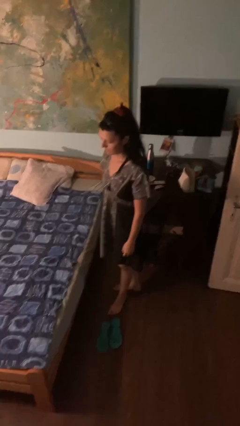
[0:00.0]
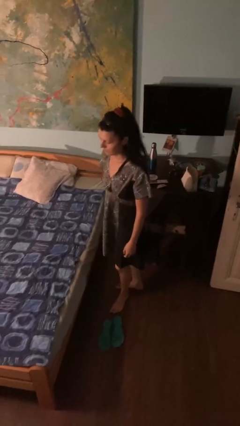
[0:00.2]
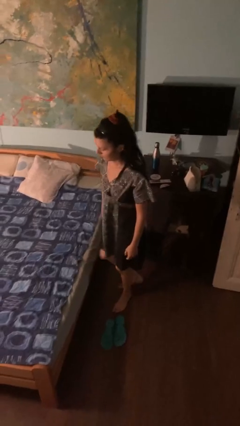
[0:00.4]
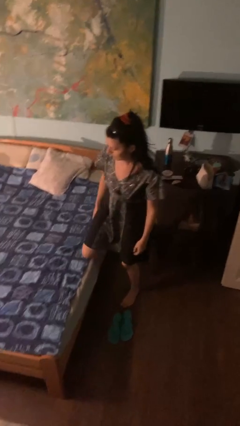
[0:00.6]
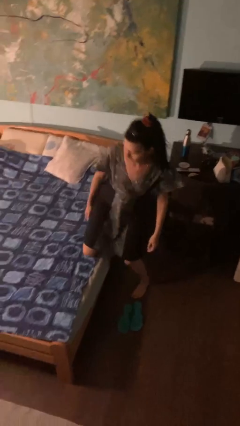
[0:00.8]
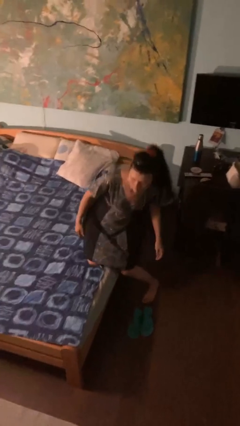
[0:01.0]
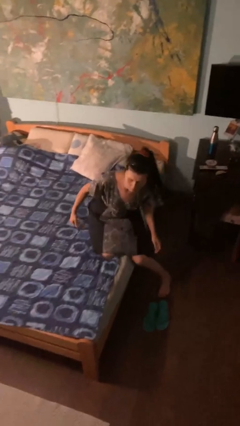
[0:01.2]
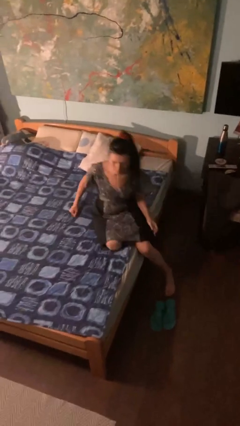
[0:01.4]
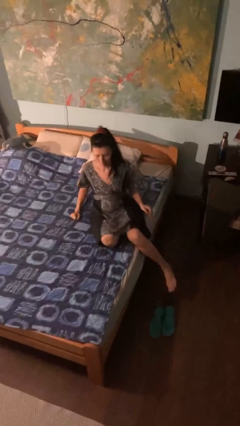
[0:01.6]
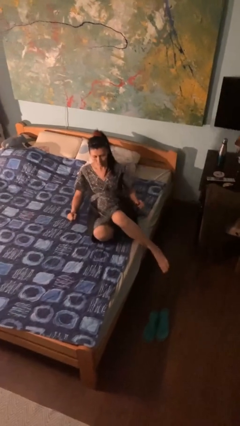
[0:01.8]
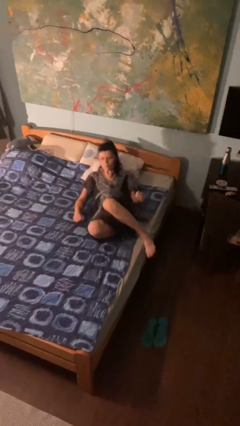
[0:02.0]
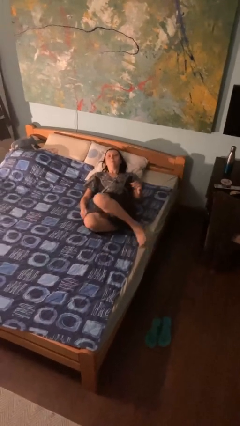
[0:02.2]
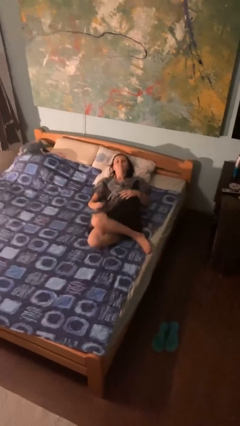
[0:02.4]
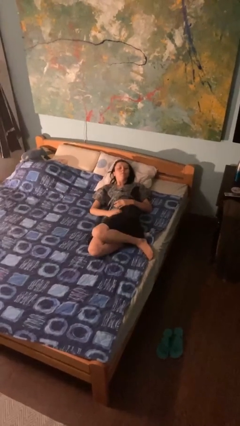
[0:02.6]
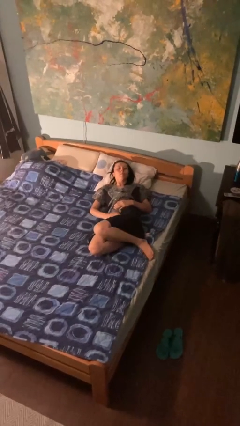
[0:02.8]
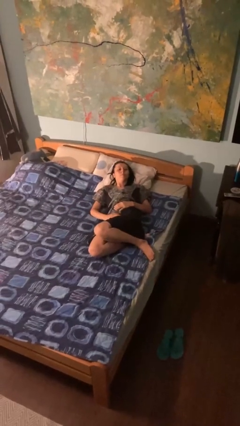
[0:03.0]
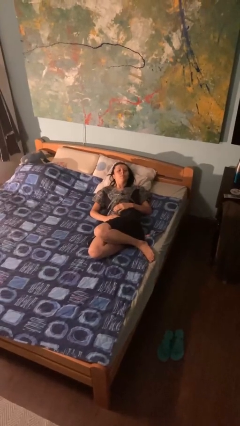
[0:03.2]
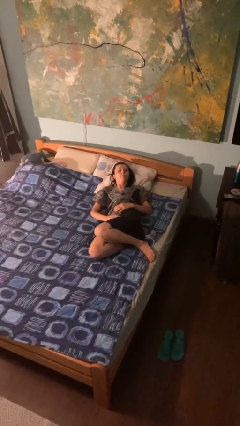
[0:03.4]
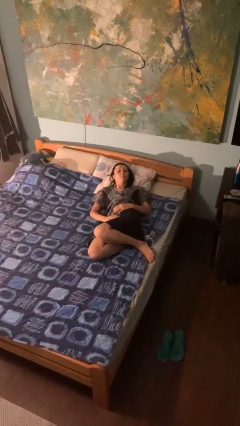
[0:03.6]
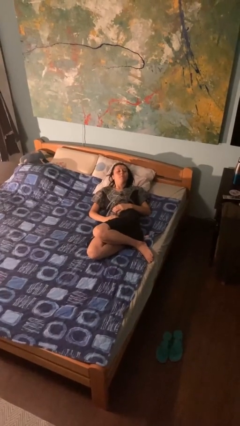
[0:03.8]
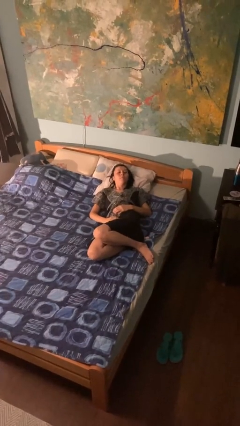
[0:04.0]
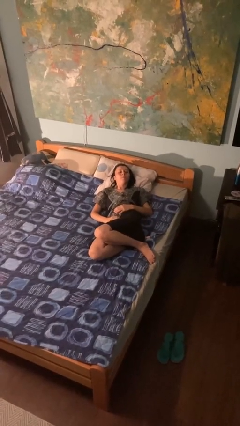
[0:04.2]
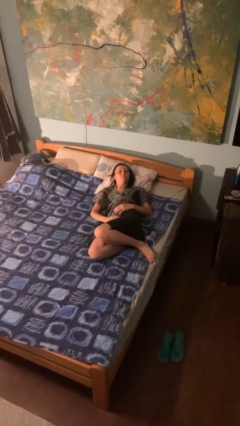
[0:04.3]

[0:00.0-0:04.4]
person lies down on bed

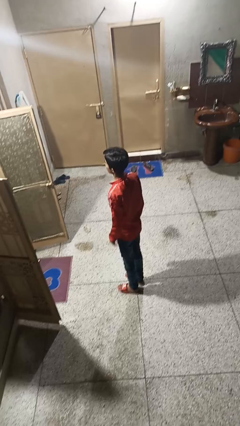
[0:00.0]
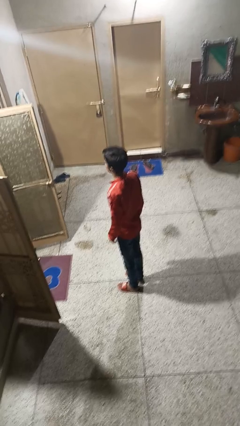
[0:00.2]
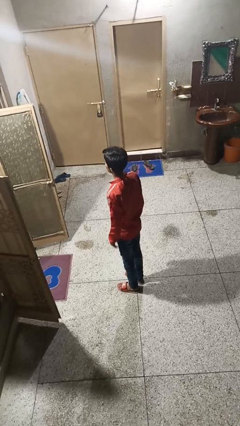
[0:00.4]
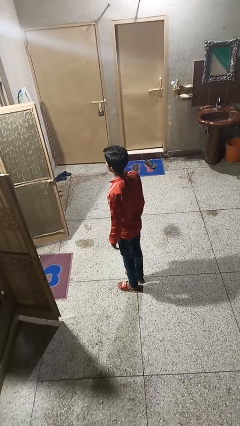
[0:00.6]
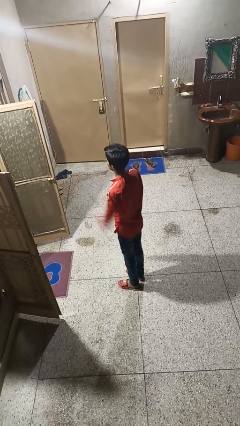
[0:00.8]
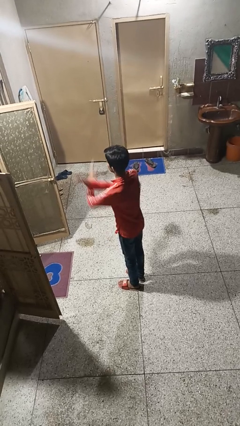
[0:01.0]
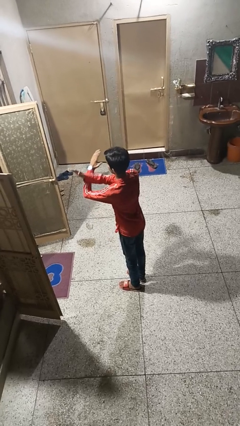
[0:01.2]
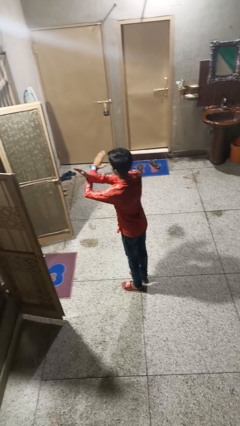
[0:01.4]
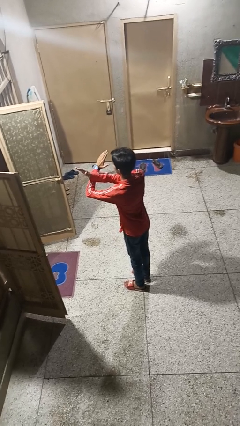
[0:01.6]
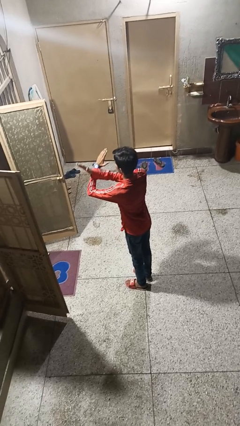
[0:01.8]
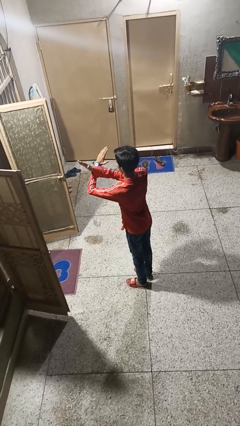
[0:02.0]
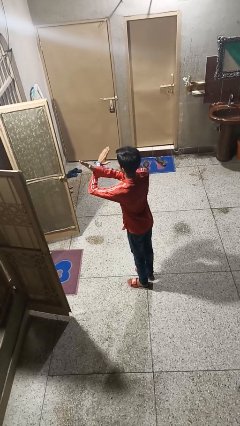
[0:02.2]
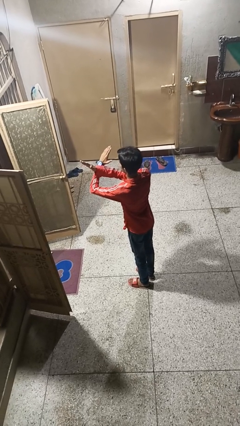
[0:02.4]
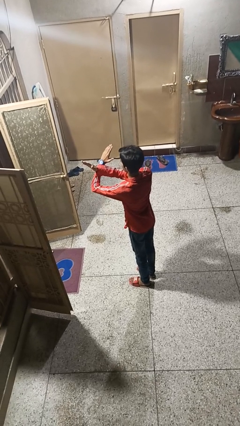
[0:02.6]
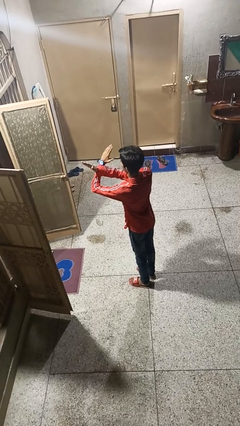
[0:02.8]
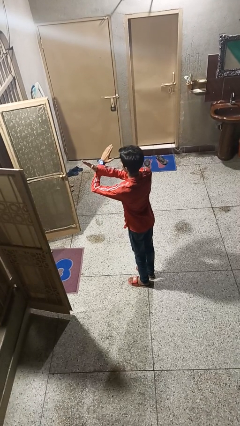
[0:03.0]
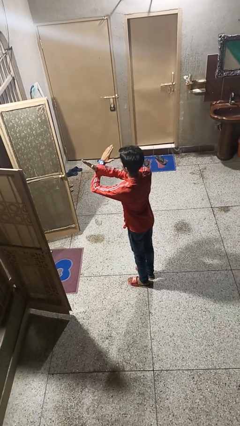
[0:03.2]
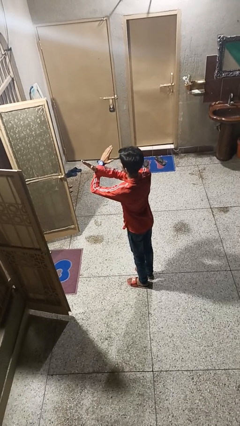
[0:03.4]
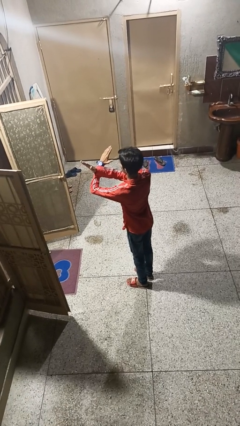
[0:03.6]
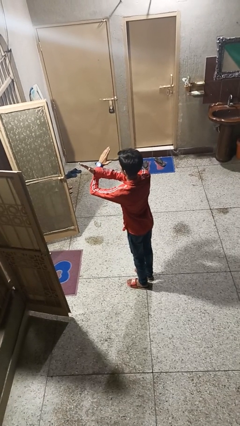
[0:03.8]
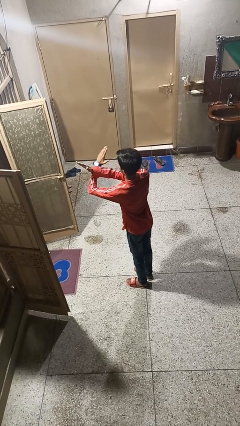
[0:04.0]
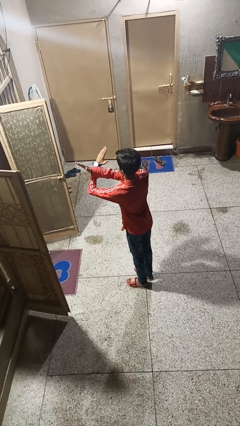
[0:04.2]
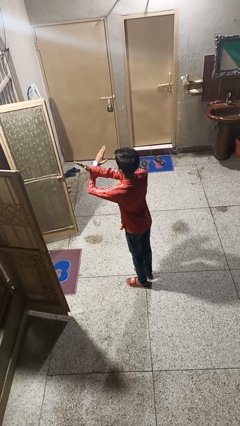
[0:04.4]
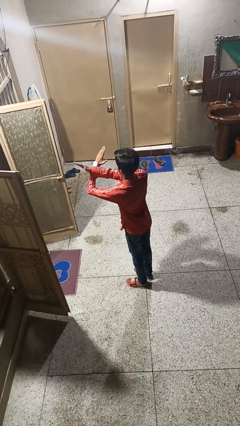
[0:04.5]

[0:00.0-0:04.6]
person gestures arms x

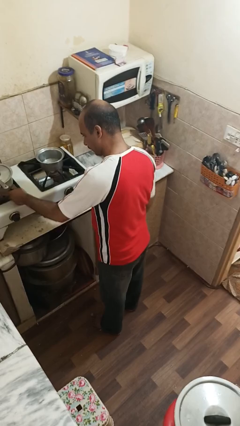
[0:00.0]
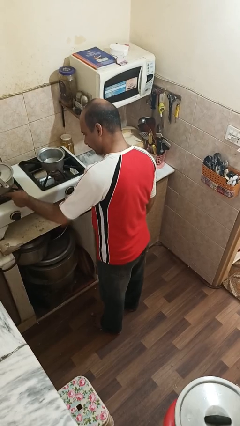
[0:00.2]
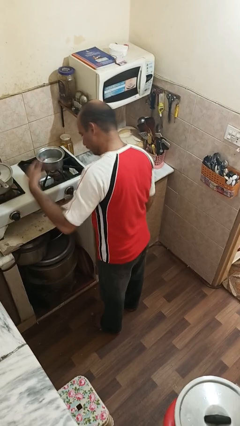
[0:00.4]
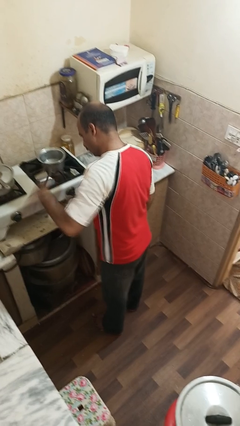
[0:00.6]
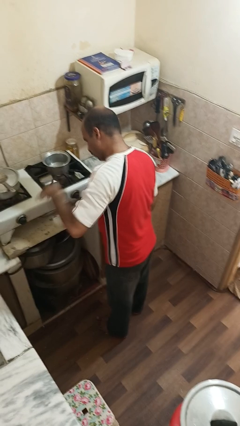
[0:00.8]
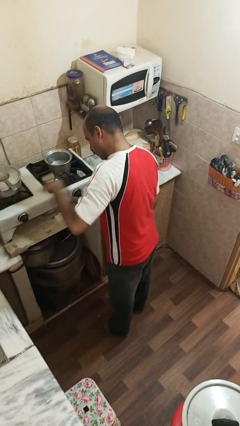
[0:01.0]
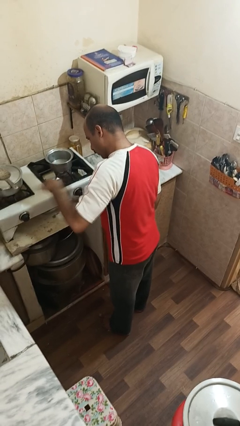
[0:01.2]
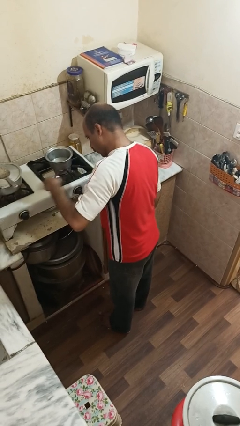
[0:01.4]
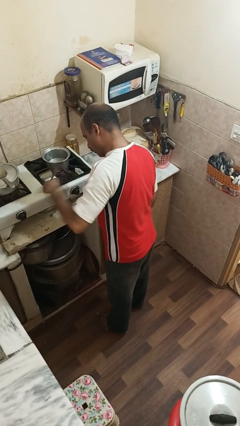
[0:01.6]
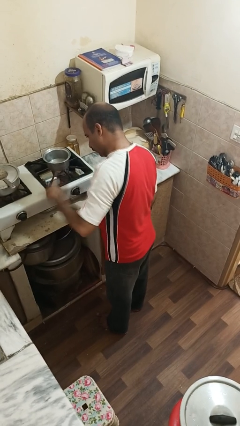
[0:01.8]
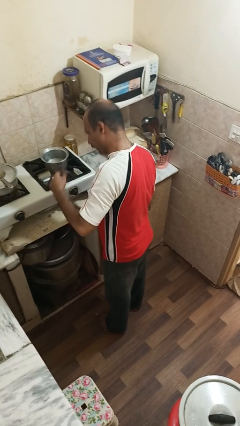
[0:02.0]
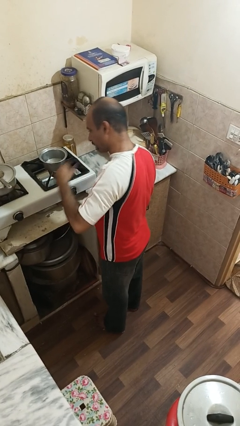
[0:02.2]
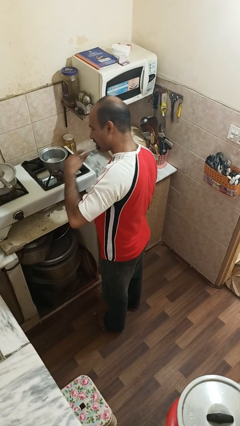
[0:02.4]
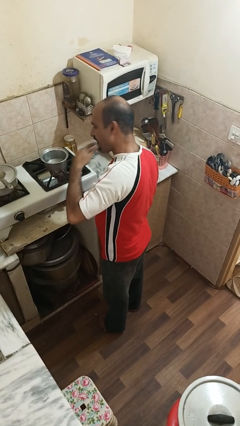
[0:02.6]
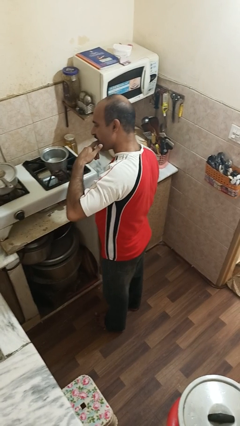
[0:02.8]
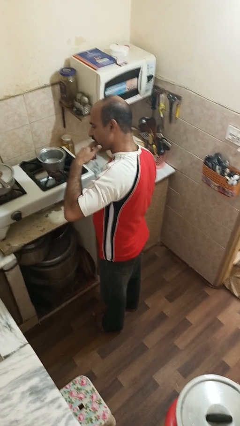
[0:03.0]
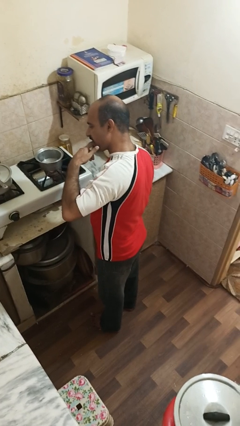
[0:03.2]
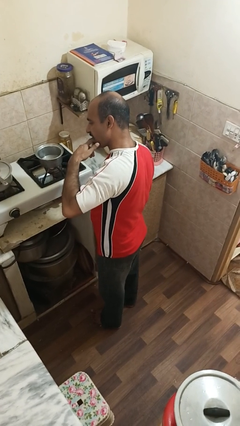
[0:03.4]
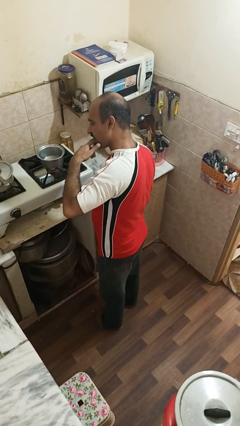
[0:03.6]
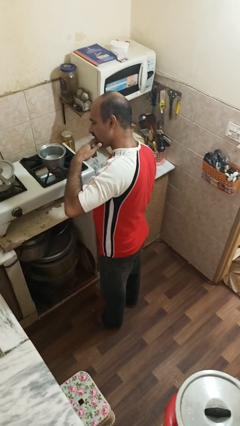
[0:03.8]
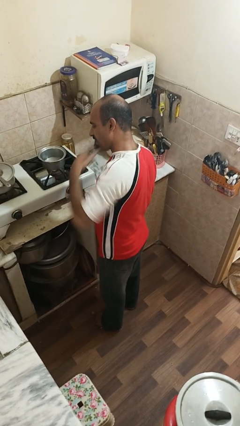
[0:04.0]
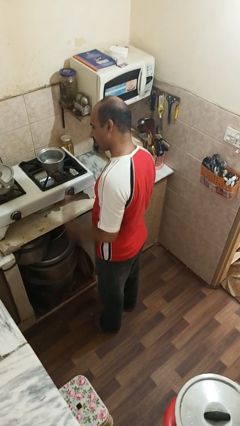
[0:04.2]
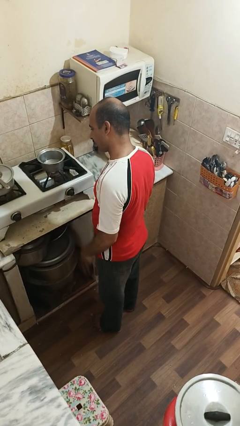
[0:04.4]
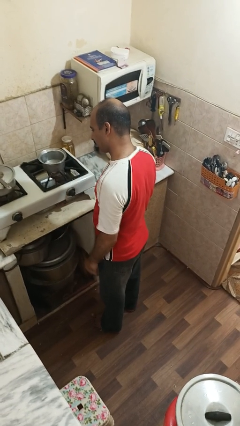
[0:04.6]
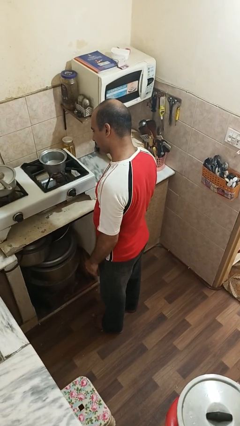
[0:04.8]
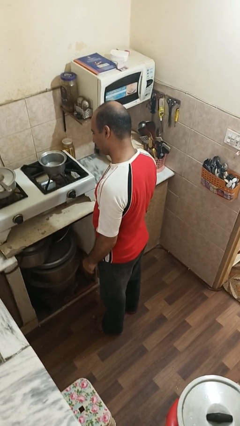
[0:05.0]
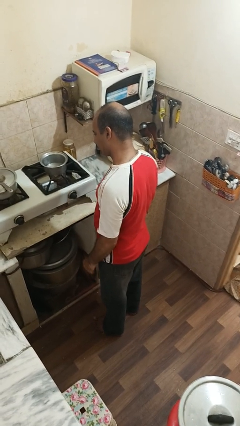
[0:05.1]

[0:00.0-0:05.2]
person burns hand

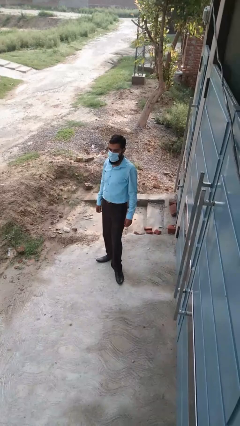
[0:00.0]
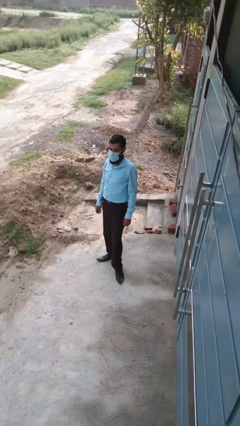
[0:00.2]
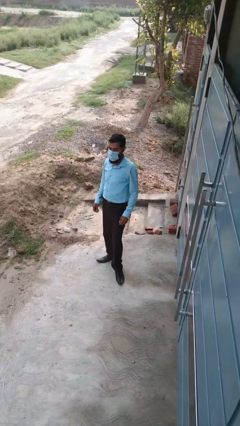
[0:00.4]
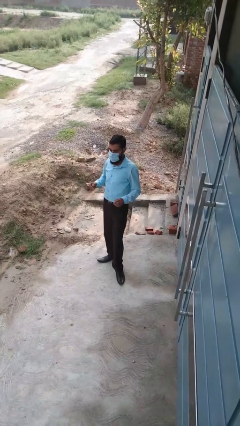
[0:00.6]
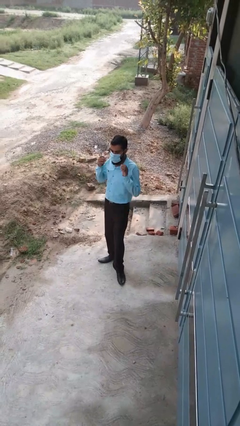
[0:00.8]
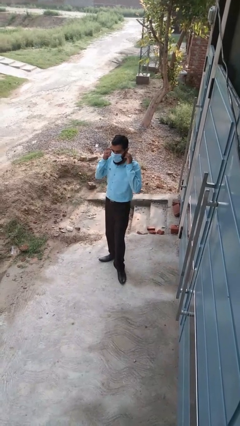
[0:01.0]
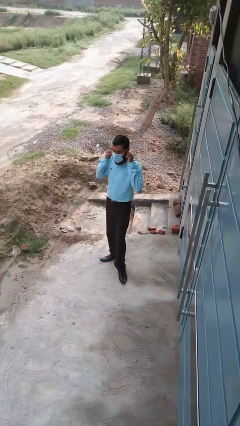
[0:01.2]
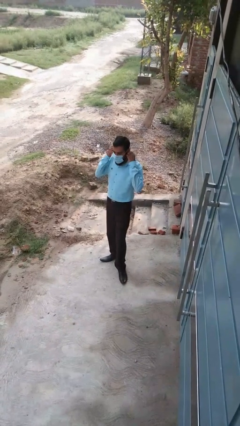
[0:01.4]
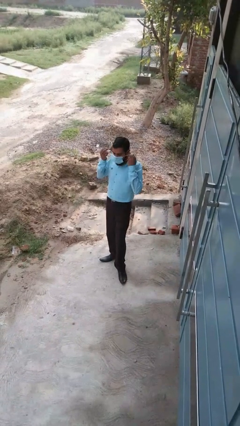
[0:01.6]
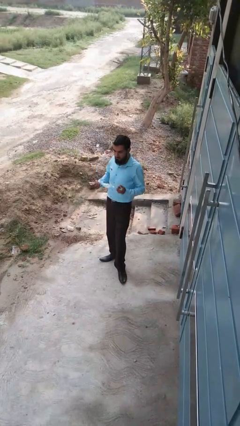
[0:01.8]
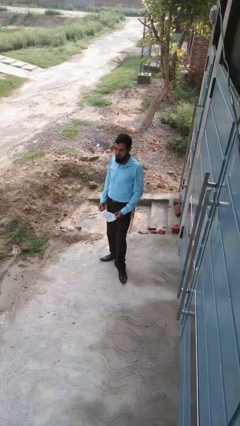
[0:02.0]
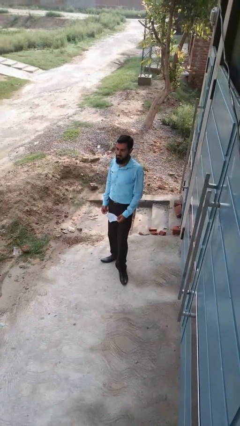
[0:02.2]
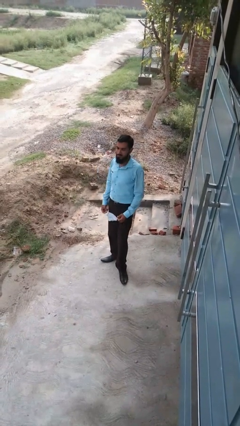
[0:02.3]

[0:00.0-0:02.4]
person takes off facemask

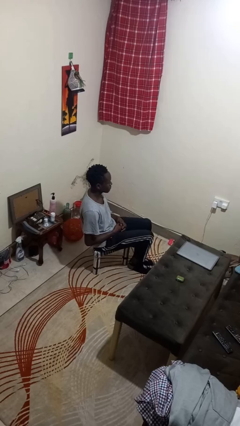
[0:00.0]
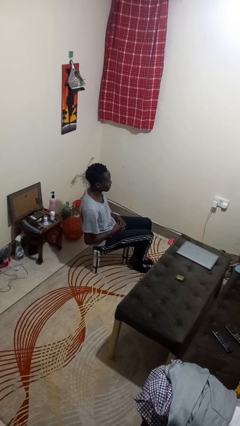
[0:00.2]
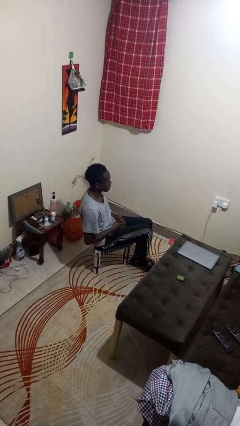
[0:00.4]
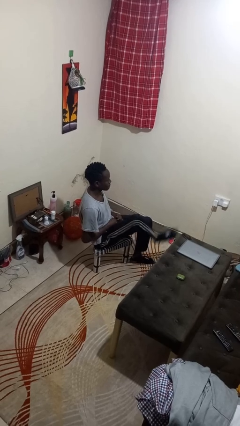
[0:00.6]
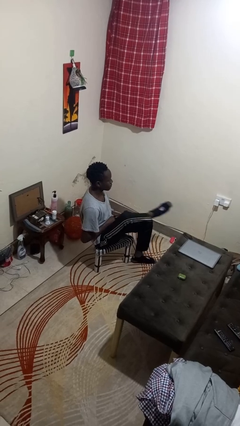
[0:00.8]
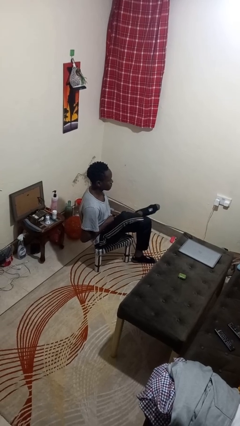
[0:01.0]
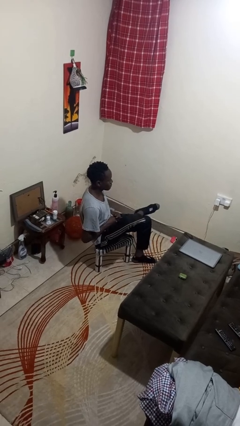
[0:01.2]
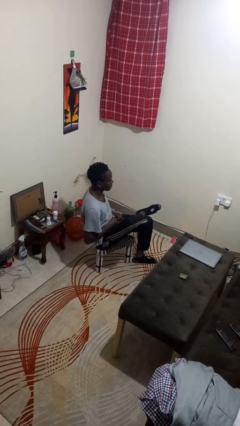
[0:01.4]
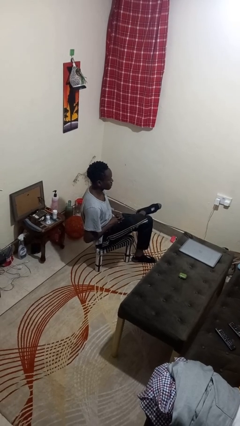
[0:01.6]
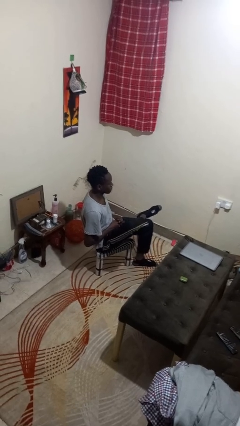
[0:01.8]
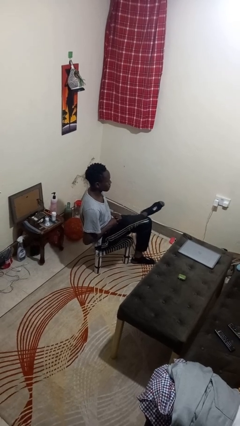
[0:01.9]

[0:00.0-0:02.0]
person crosses legs
